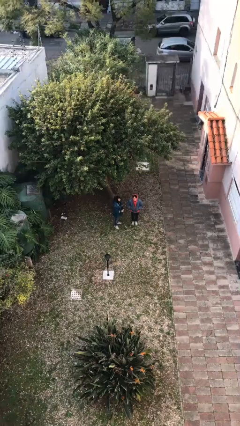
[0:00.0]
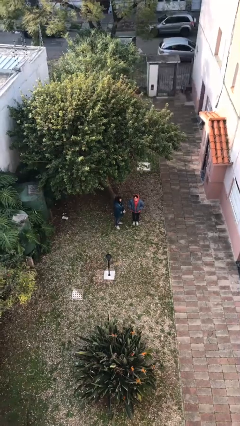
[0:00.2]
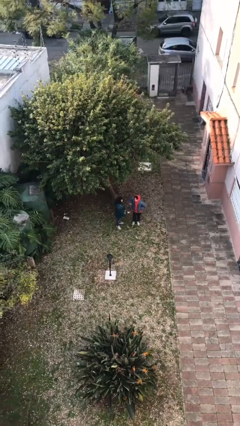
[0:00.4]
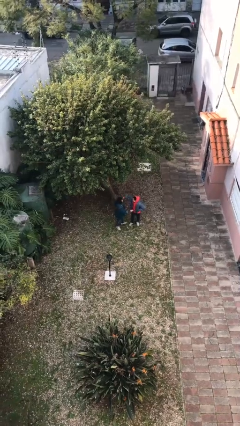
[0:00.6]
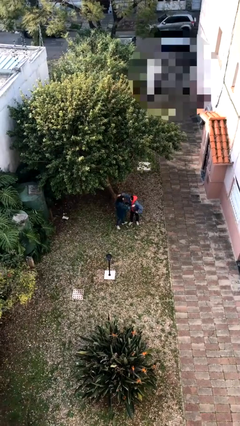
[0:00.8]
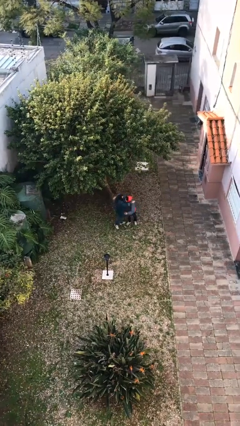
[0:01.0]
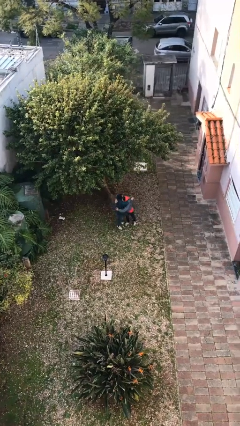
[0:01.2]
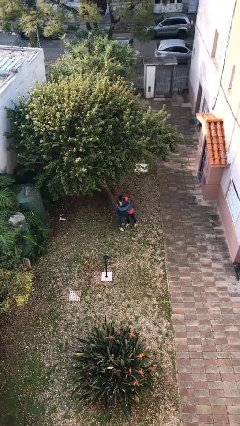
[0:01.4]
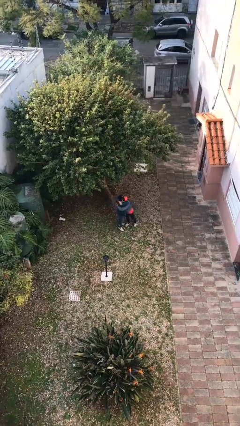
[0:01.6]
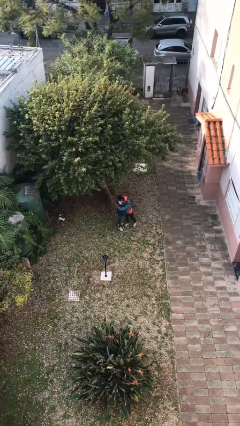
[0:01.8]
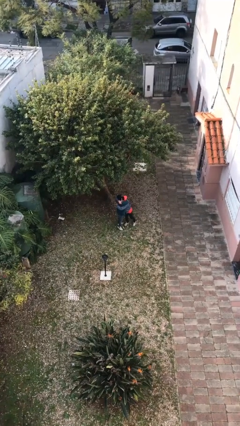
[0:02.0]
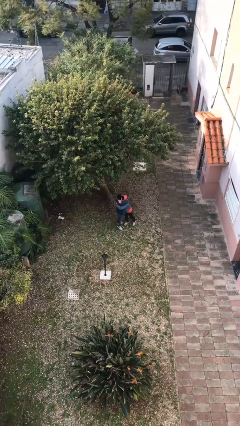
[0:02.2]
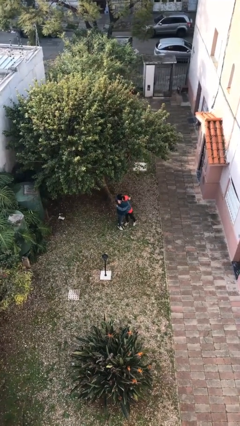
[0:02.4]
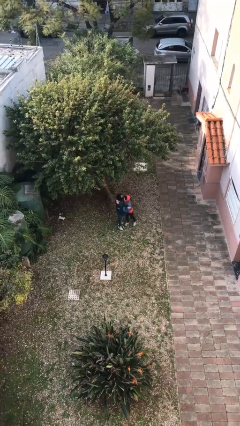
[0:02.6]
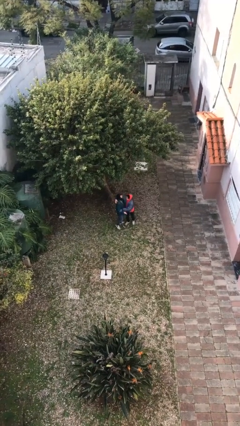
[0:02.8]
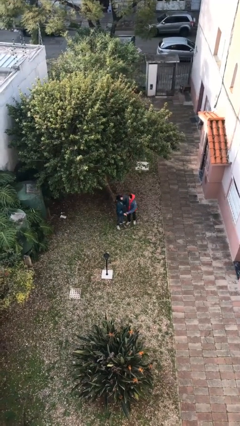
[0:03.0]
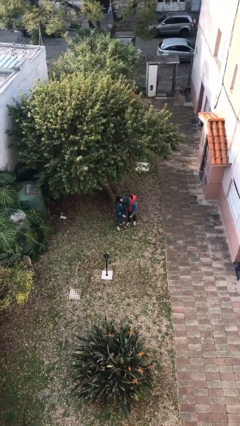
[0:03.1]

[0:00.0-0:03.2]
person embraces person

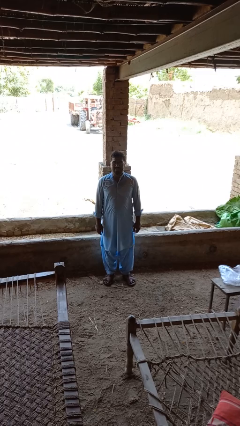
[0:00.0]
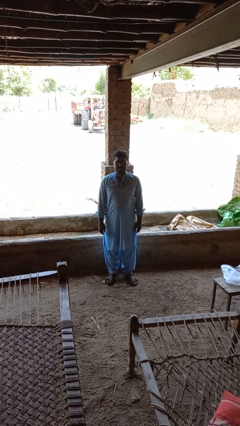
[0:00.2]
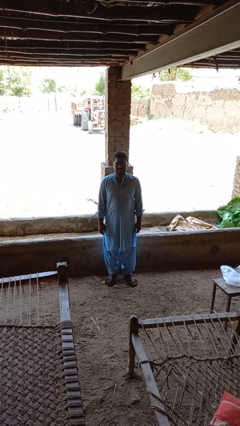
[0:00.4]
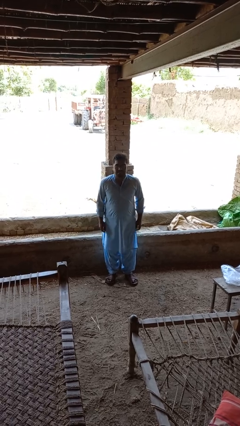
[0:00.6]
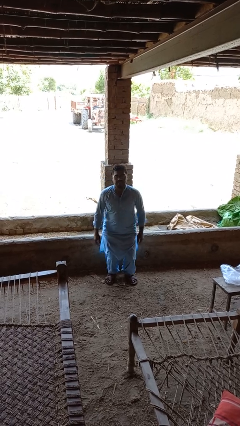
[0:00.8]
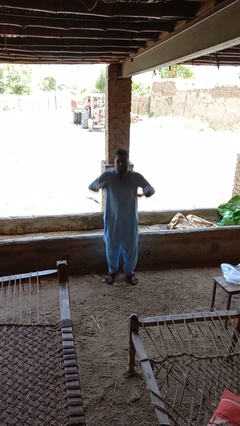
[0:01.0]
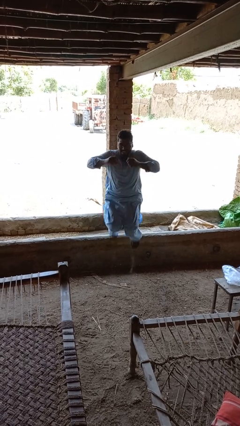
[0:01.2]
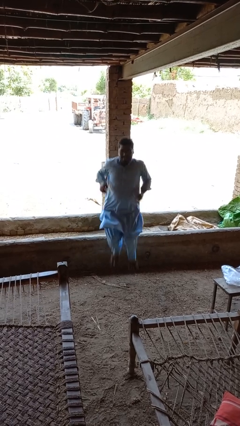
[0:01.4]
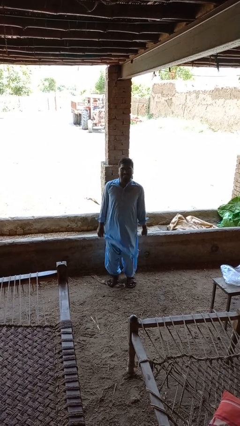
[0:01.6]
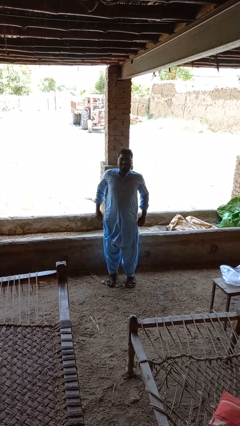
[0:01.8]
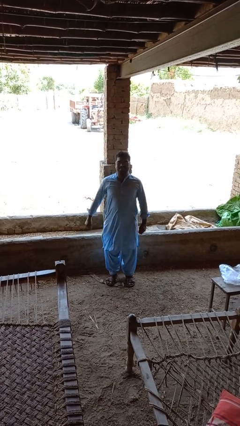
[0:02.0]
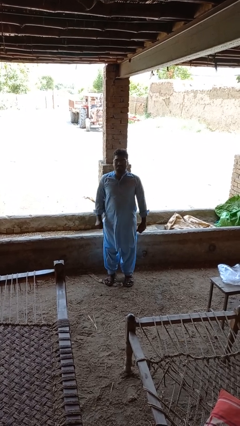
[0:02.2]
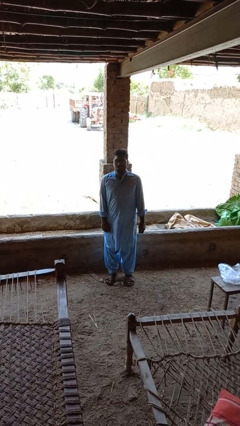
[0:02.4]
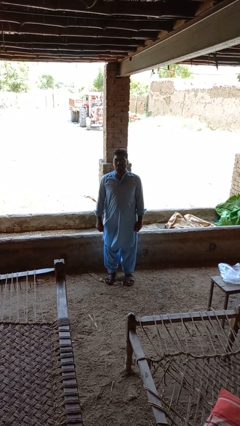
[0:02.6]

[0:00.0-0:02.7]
person jumps

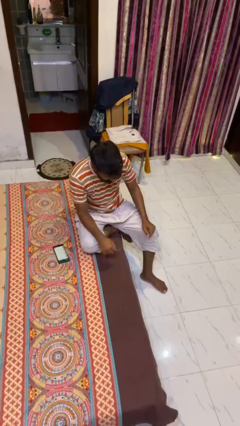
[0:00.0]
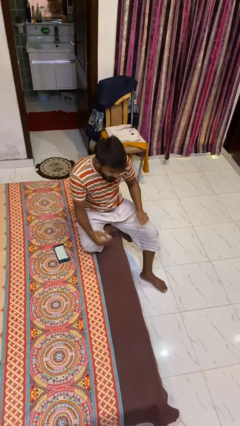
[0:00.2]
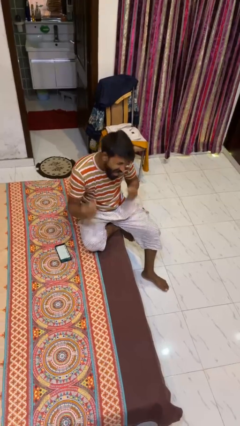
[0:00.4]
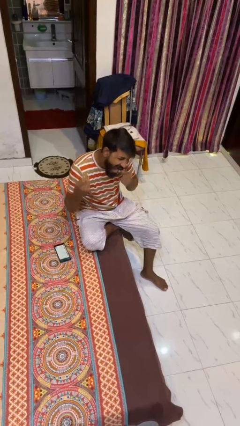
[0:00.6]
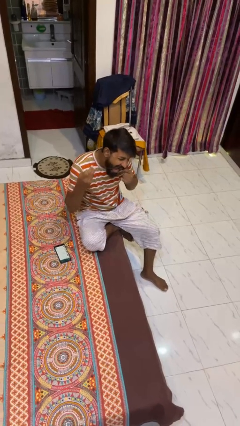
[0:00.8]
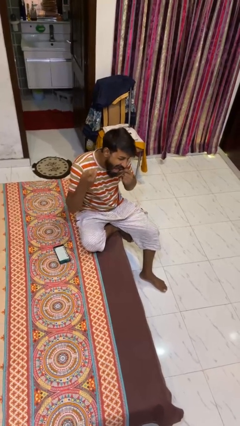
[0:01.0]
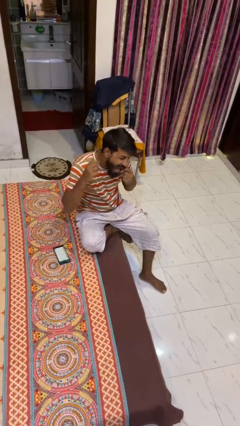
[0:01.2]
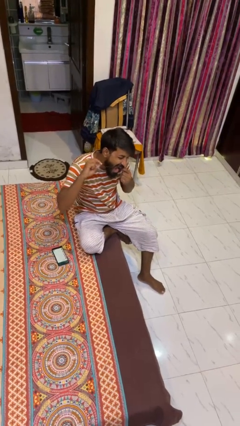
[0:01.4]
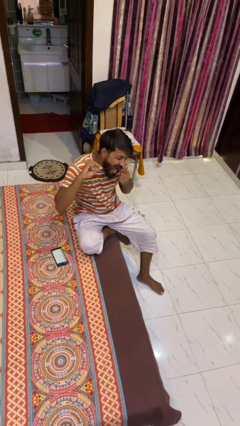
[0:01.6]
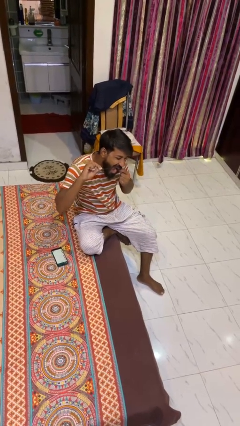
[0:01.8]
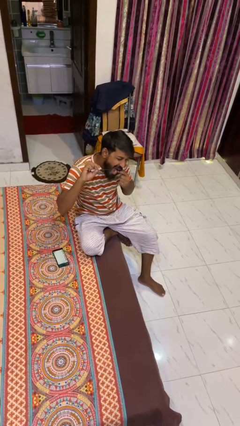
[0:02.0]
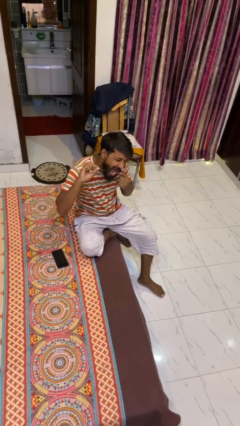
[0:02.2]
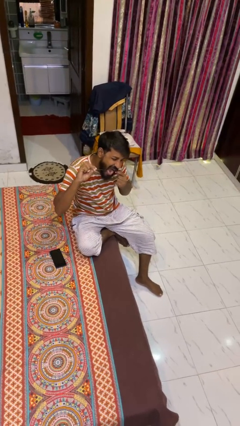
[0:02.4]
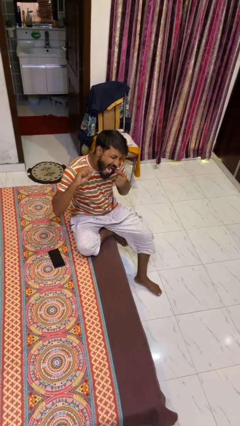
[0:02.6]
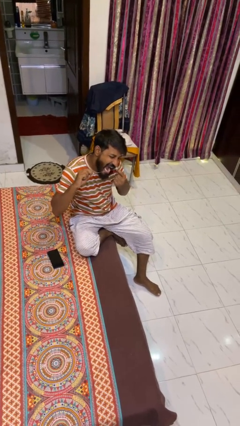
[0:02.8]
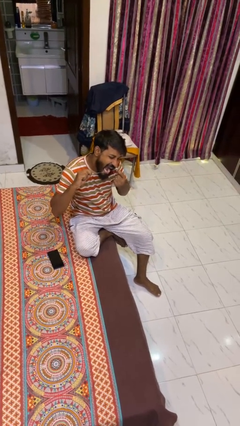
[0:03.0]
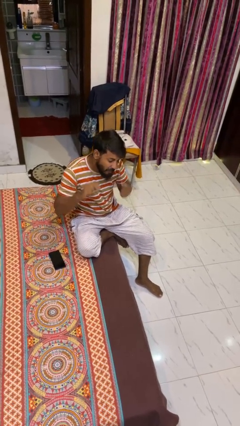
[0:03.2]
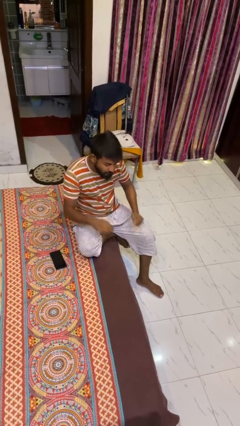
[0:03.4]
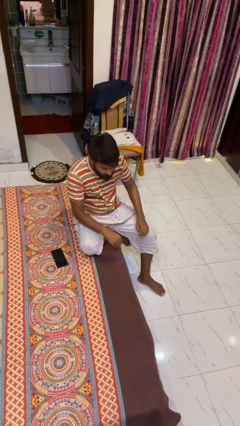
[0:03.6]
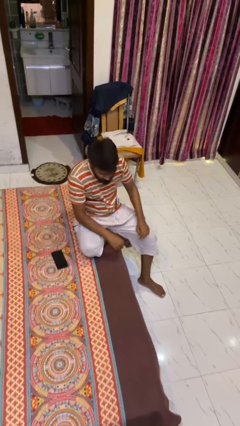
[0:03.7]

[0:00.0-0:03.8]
person flosses

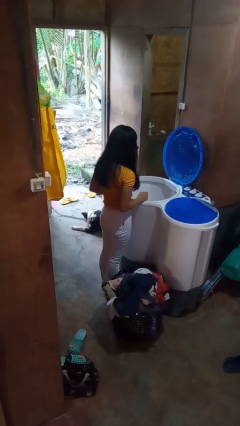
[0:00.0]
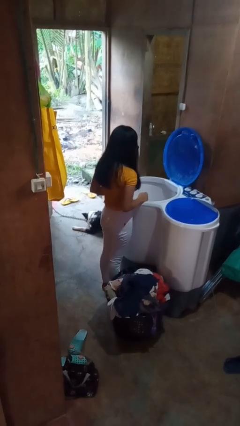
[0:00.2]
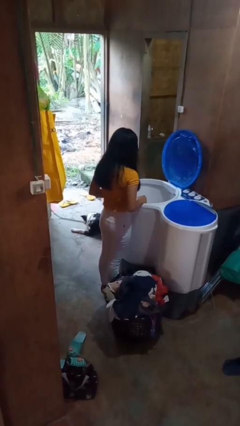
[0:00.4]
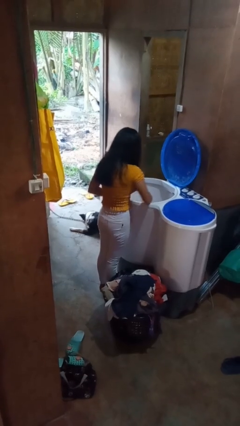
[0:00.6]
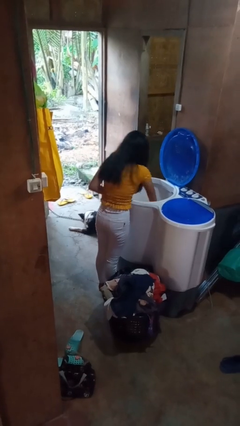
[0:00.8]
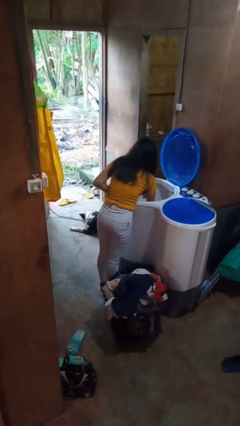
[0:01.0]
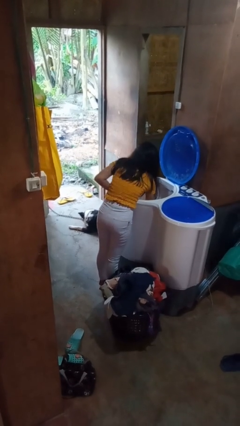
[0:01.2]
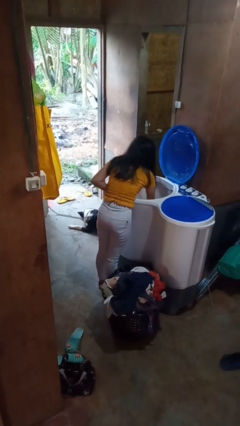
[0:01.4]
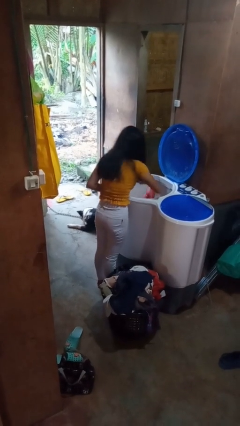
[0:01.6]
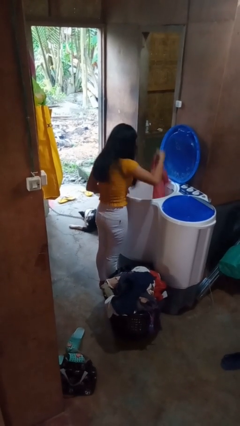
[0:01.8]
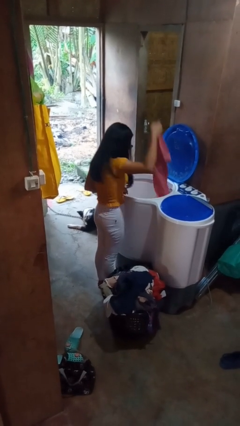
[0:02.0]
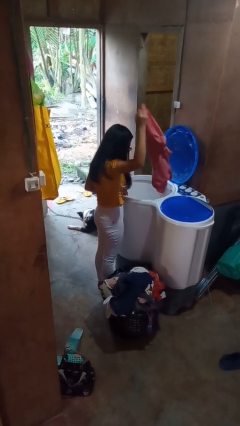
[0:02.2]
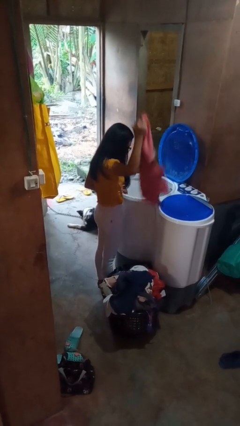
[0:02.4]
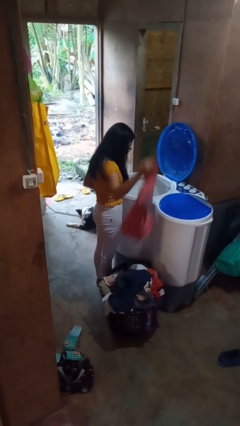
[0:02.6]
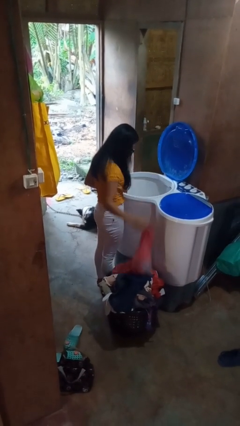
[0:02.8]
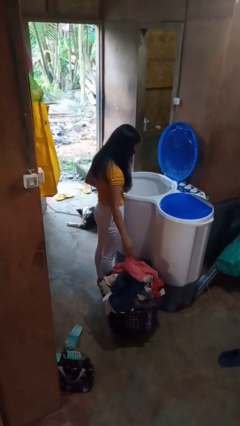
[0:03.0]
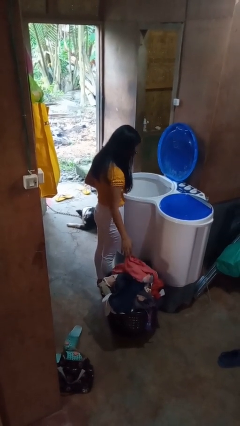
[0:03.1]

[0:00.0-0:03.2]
person unloads clotheswasher

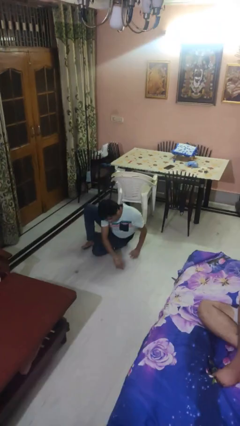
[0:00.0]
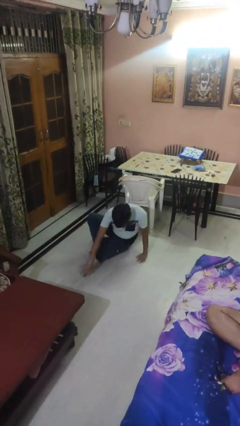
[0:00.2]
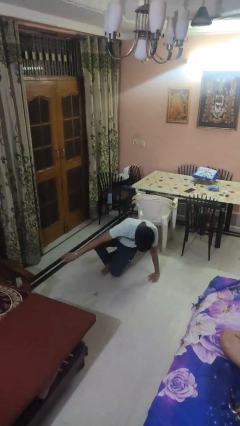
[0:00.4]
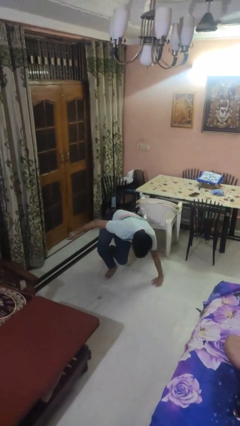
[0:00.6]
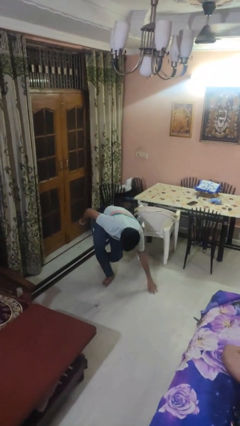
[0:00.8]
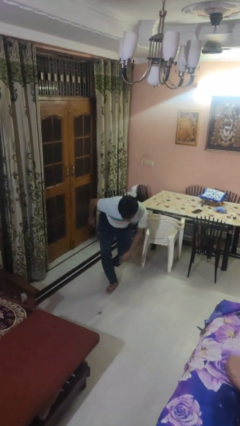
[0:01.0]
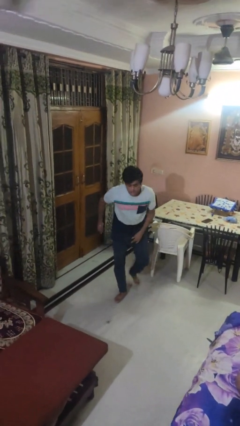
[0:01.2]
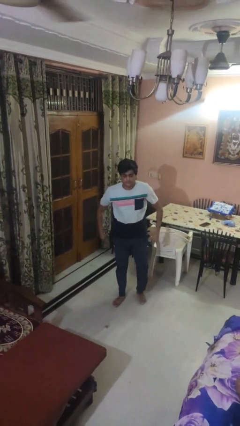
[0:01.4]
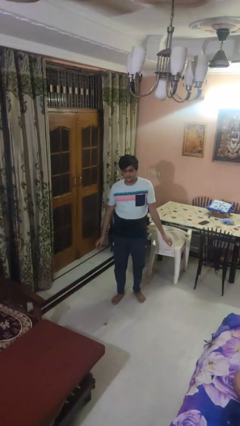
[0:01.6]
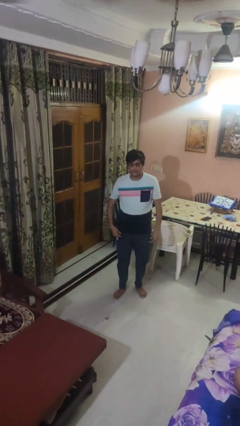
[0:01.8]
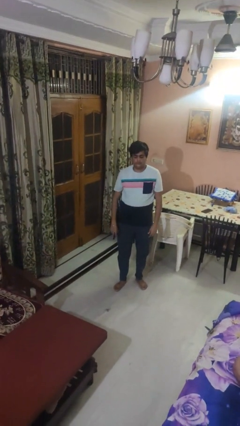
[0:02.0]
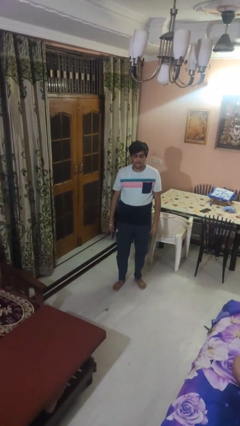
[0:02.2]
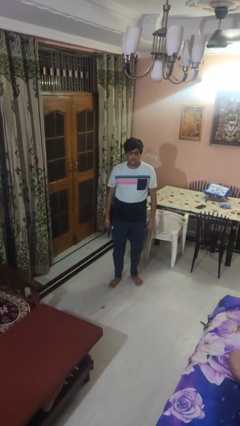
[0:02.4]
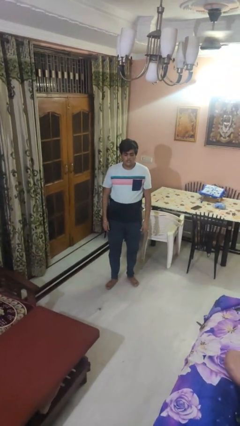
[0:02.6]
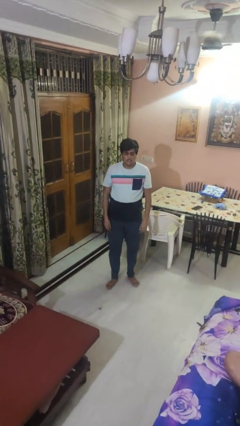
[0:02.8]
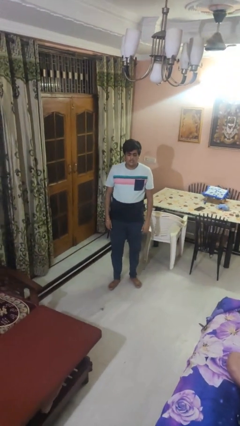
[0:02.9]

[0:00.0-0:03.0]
person stands up from floor

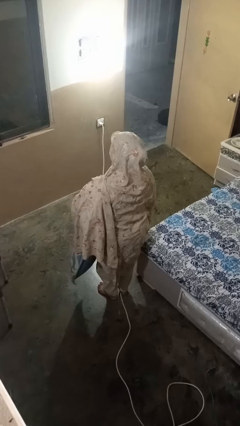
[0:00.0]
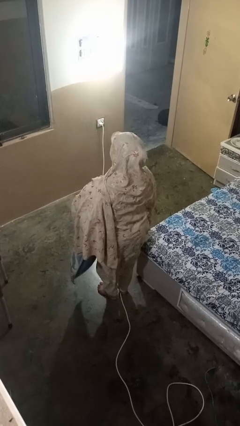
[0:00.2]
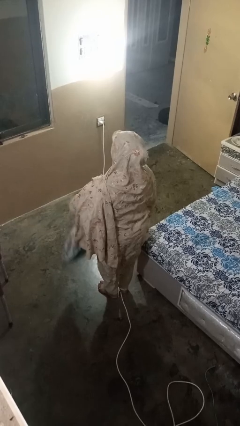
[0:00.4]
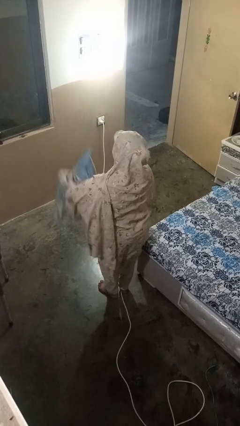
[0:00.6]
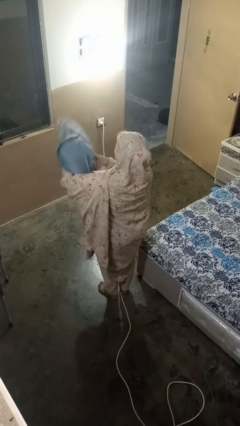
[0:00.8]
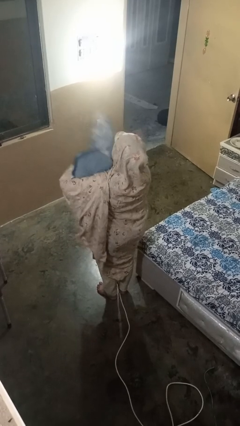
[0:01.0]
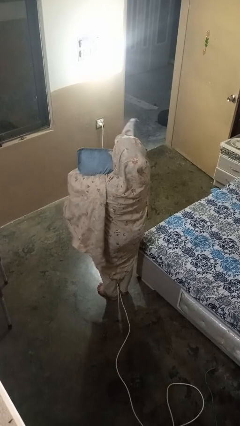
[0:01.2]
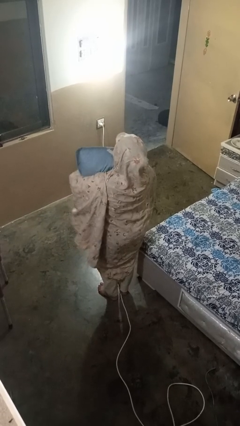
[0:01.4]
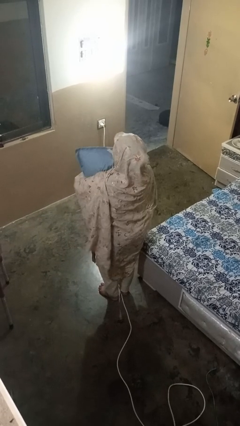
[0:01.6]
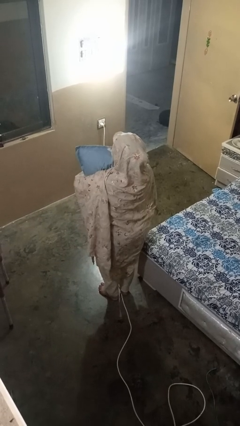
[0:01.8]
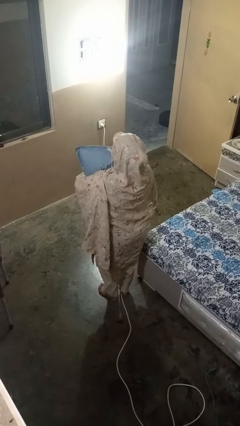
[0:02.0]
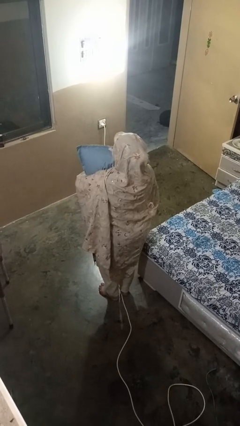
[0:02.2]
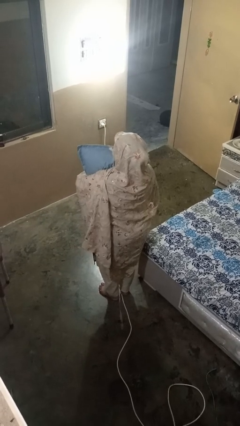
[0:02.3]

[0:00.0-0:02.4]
person squeezes object
